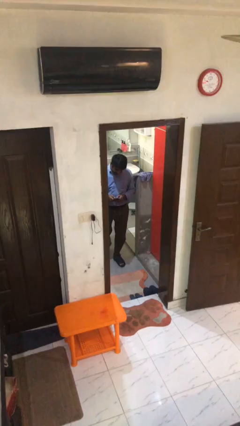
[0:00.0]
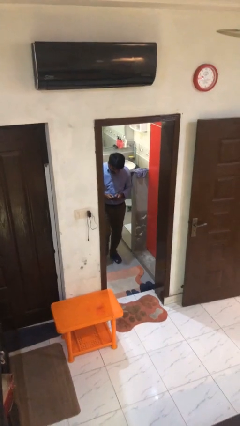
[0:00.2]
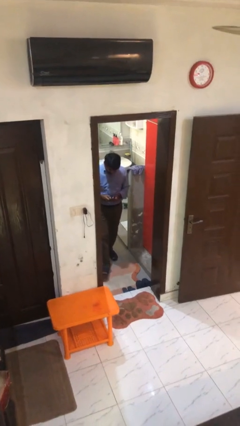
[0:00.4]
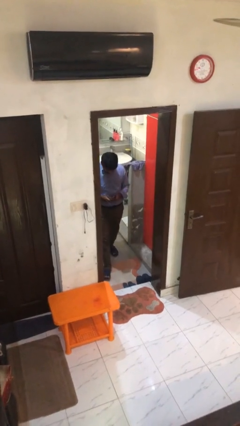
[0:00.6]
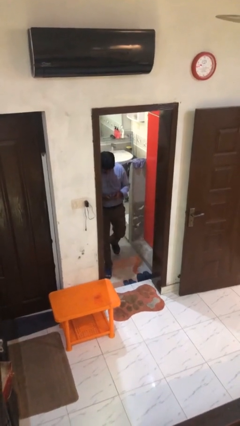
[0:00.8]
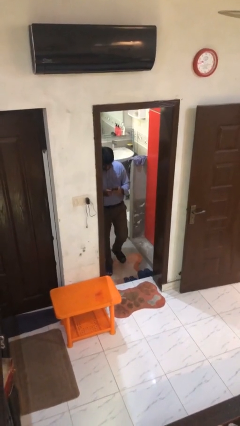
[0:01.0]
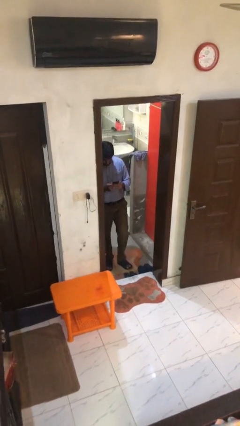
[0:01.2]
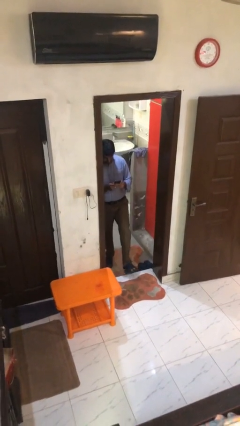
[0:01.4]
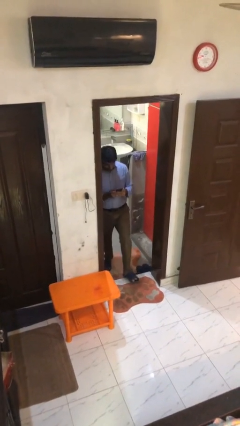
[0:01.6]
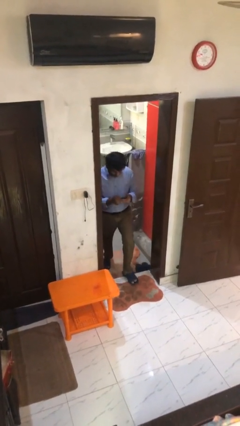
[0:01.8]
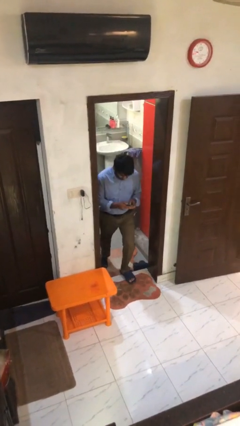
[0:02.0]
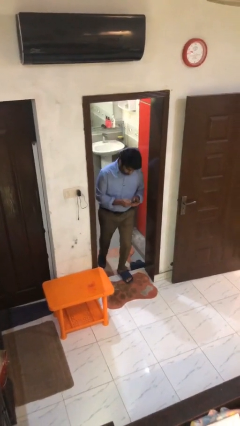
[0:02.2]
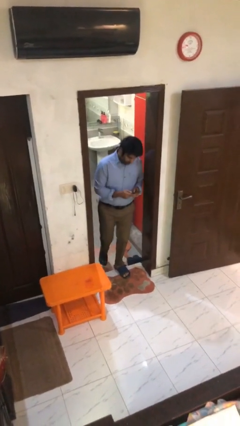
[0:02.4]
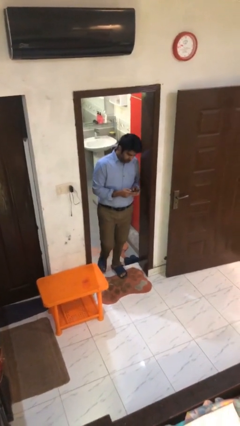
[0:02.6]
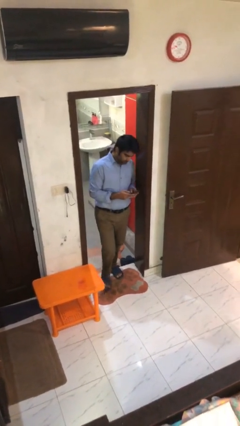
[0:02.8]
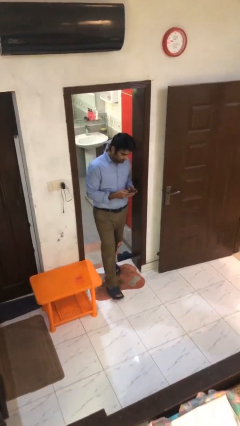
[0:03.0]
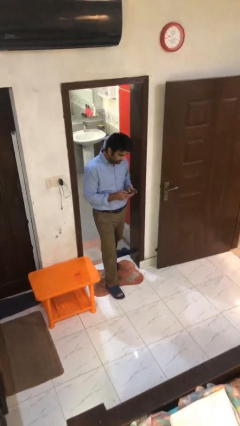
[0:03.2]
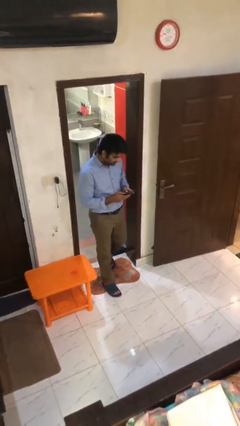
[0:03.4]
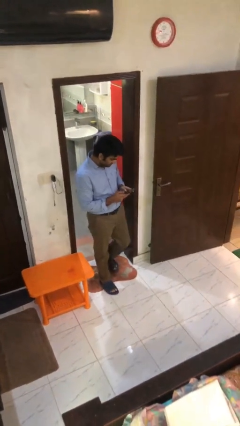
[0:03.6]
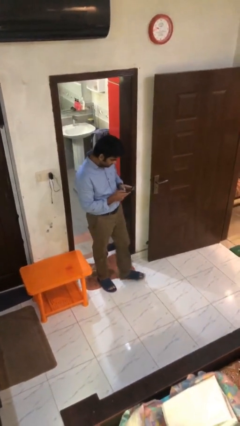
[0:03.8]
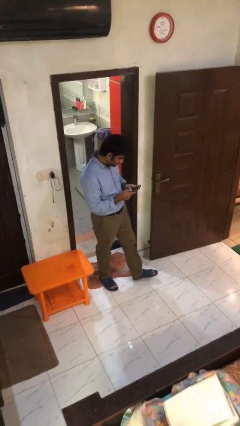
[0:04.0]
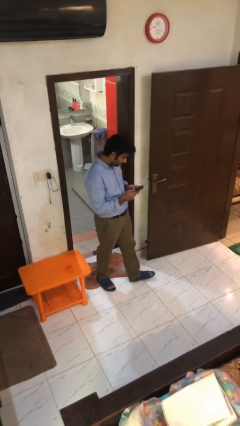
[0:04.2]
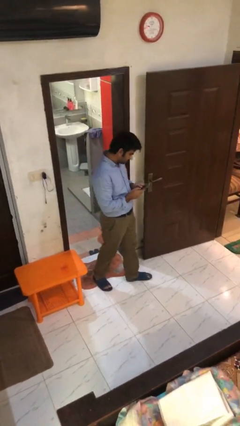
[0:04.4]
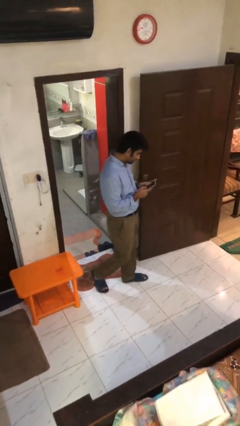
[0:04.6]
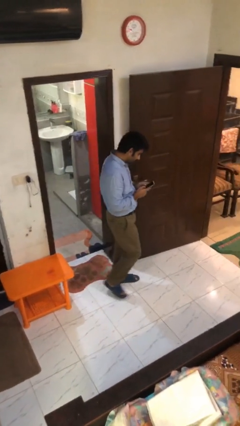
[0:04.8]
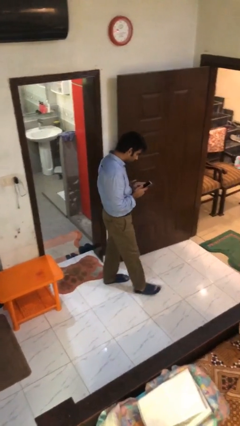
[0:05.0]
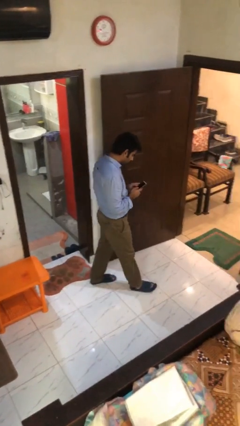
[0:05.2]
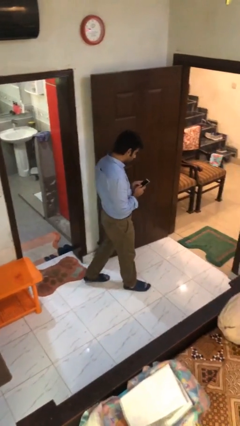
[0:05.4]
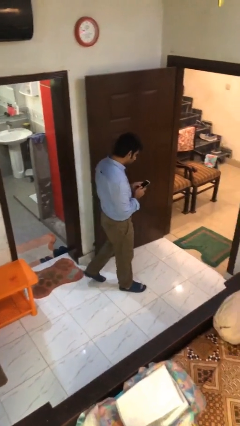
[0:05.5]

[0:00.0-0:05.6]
person texts on phone

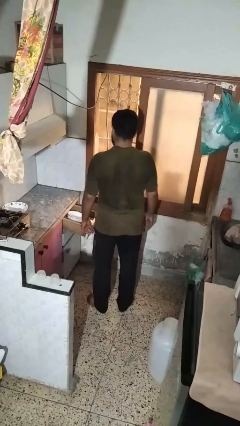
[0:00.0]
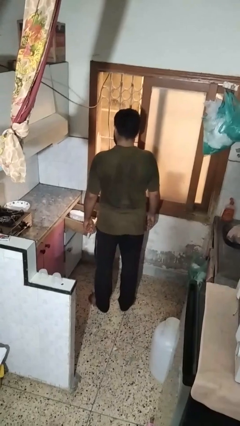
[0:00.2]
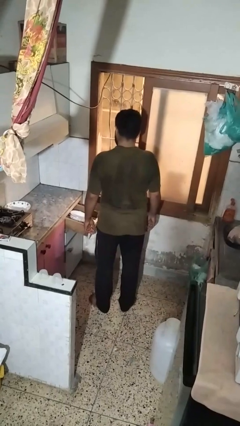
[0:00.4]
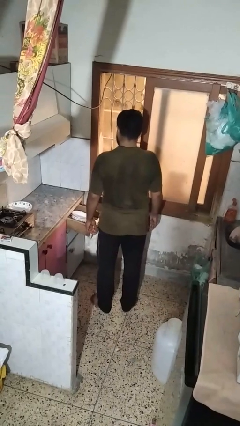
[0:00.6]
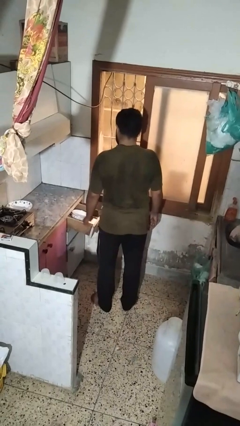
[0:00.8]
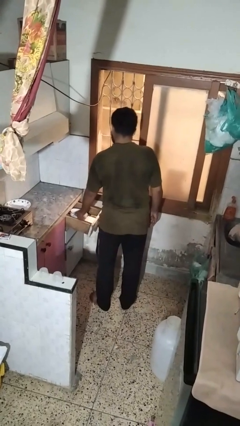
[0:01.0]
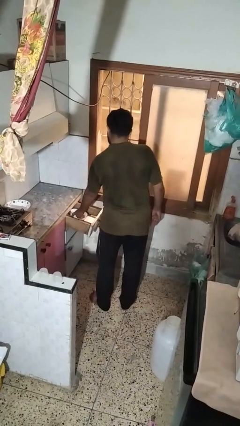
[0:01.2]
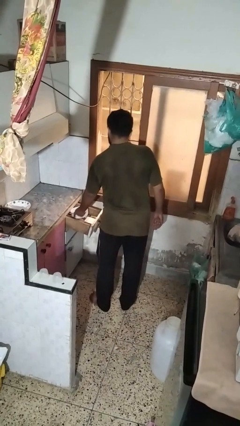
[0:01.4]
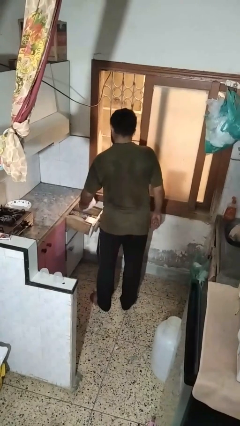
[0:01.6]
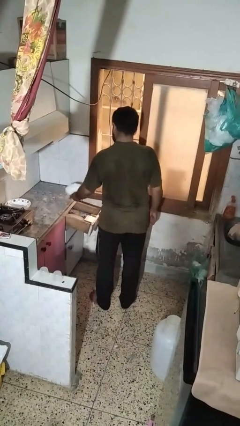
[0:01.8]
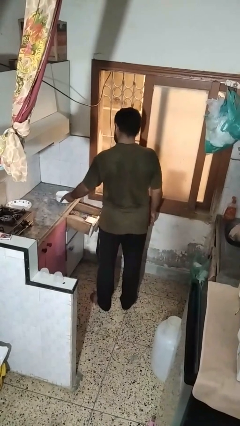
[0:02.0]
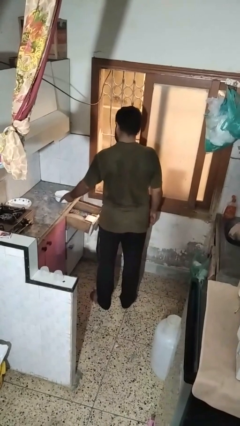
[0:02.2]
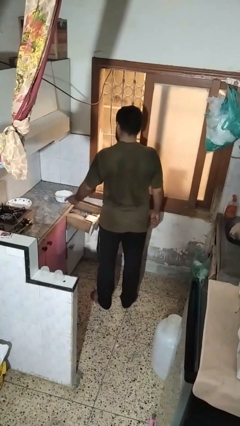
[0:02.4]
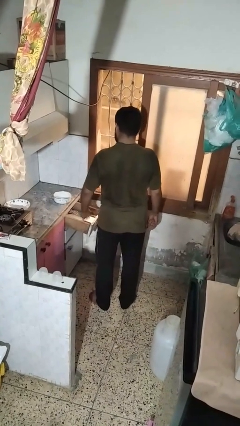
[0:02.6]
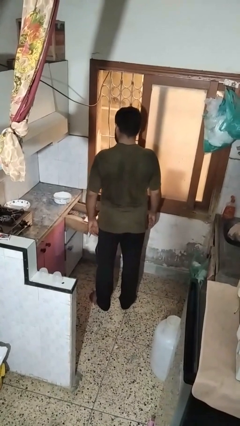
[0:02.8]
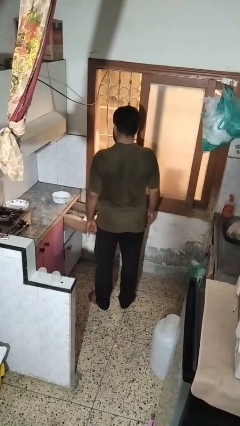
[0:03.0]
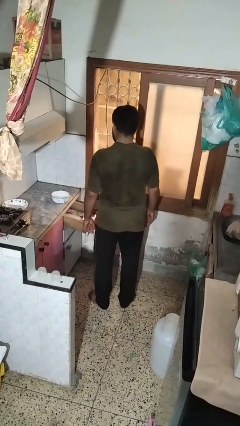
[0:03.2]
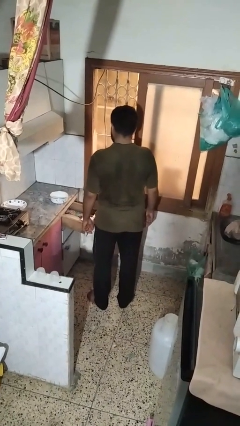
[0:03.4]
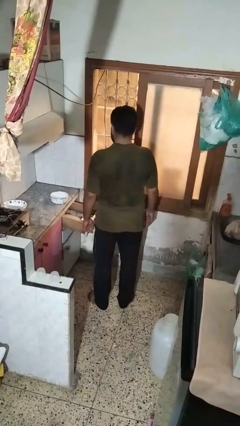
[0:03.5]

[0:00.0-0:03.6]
person takes object from kitchen drawer

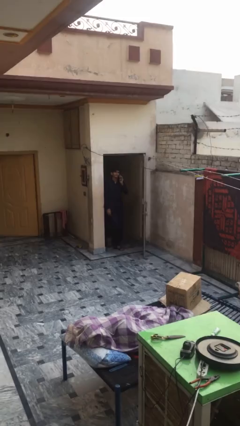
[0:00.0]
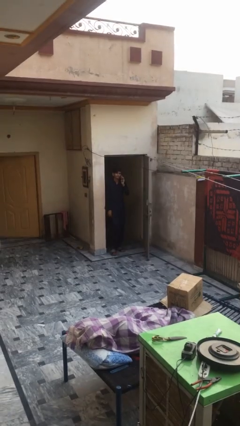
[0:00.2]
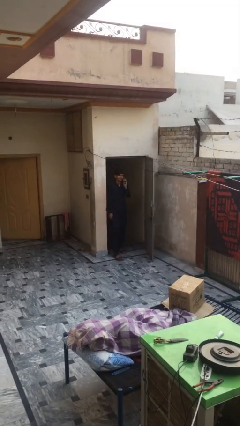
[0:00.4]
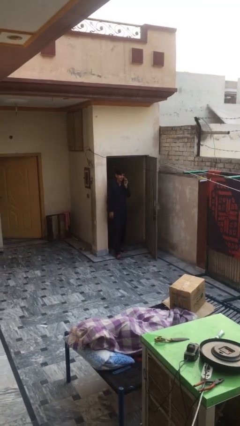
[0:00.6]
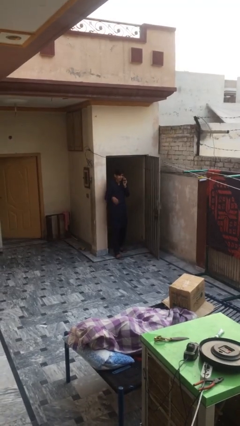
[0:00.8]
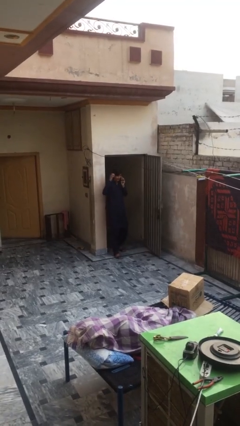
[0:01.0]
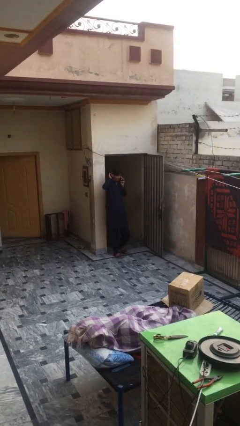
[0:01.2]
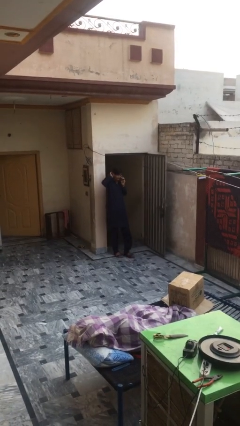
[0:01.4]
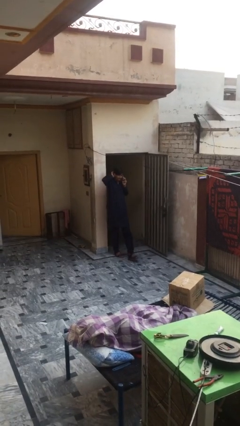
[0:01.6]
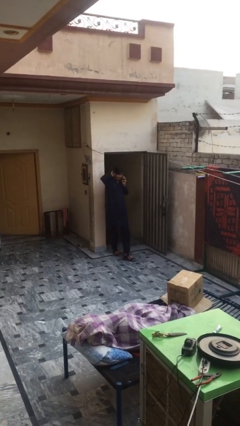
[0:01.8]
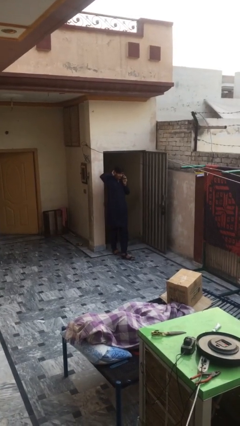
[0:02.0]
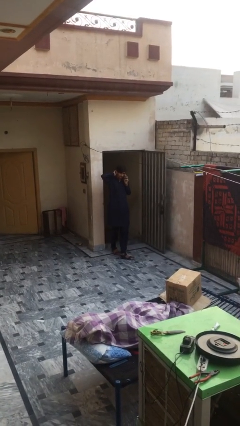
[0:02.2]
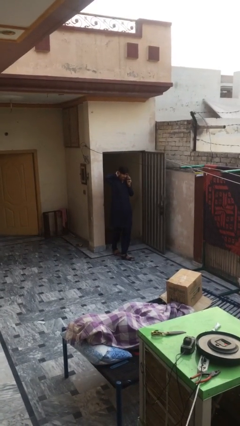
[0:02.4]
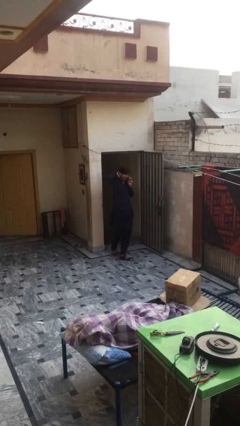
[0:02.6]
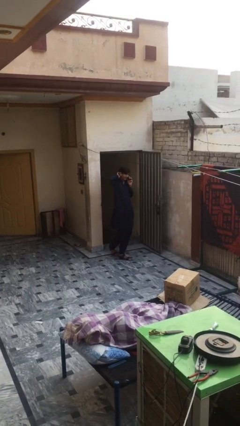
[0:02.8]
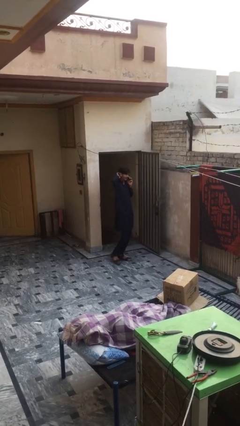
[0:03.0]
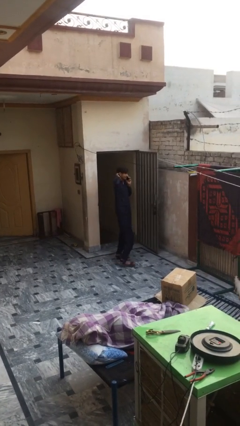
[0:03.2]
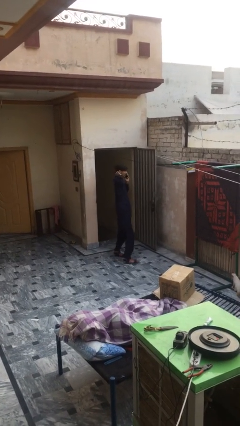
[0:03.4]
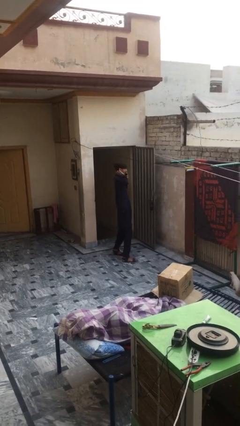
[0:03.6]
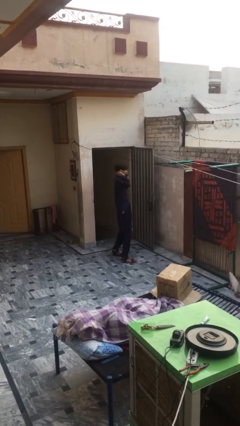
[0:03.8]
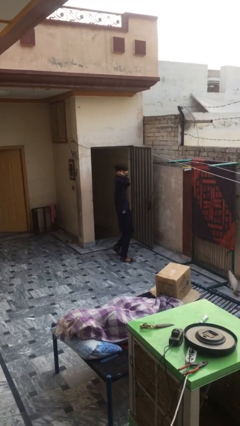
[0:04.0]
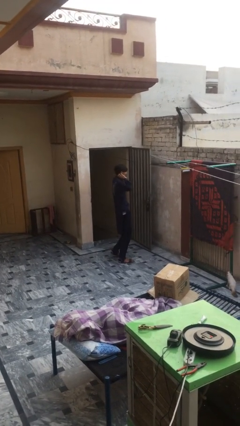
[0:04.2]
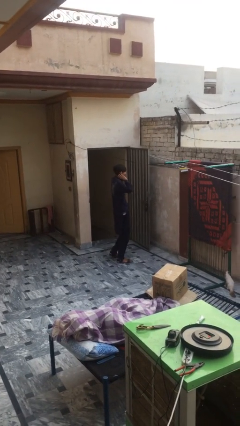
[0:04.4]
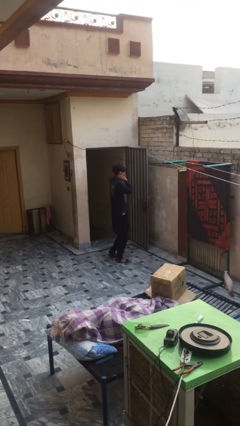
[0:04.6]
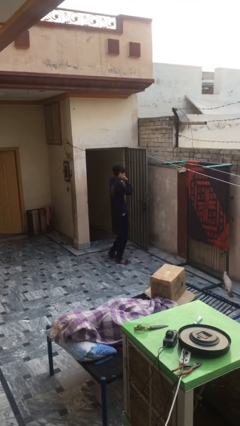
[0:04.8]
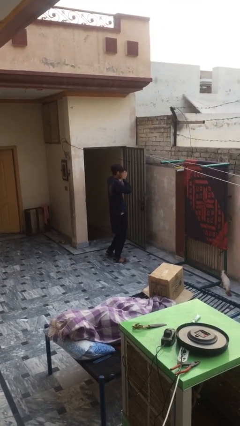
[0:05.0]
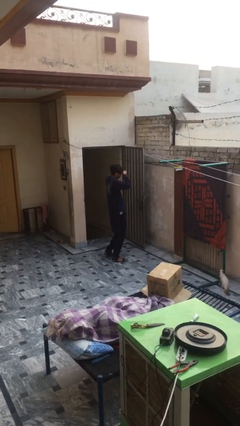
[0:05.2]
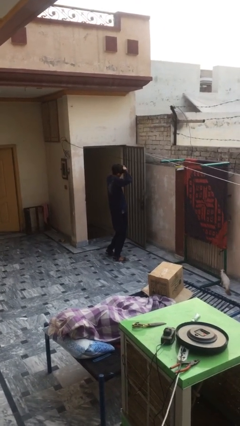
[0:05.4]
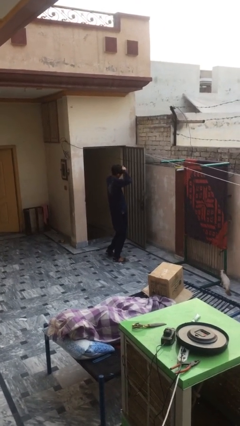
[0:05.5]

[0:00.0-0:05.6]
person enters scene through structure

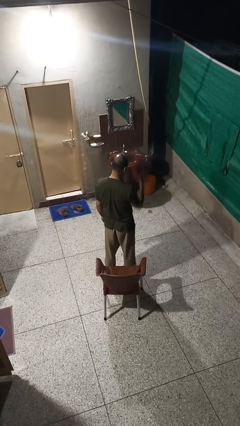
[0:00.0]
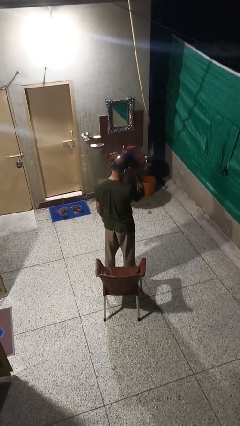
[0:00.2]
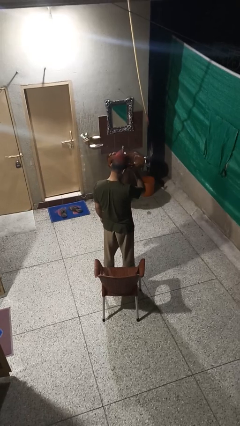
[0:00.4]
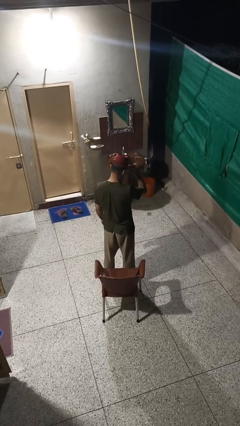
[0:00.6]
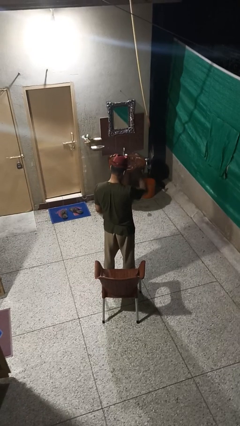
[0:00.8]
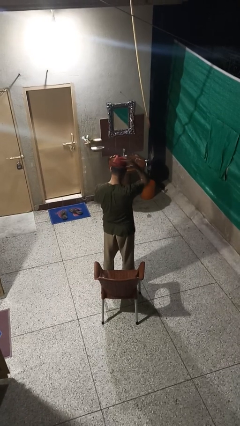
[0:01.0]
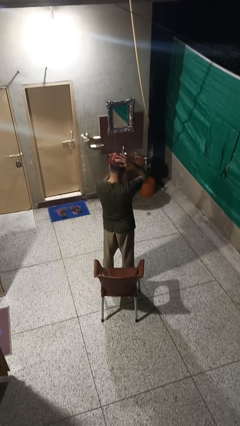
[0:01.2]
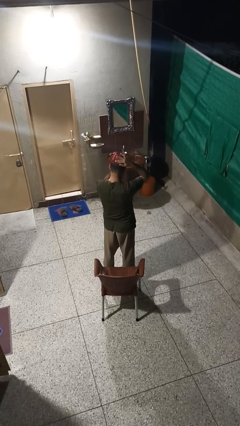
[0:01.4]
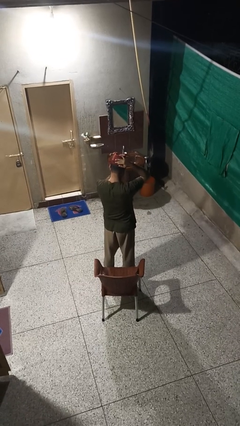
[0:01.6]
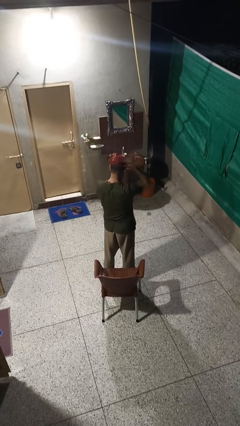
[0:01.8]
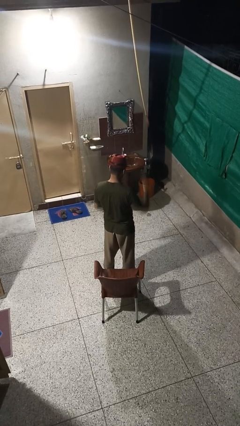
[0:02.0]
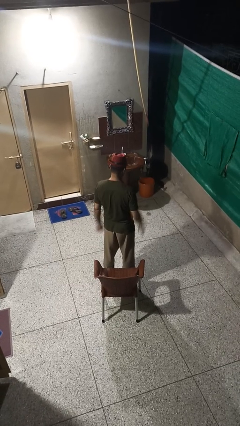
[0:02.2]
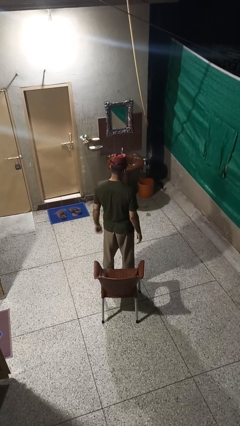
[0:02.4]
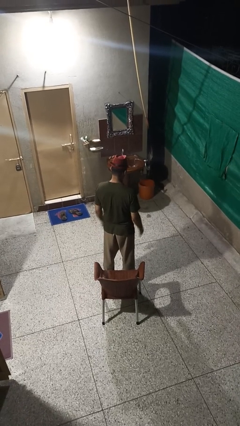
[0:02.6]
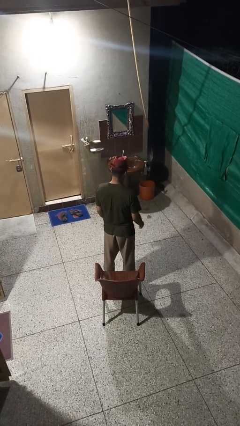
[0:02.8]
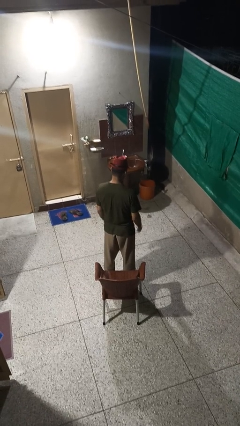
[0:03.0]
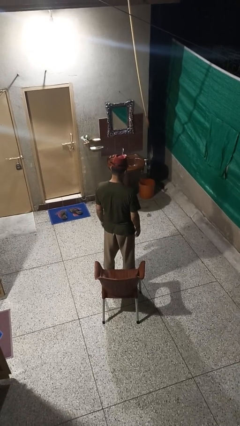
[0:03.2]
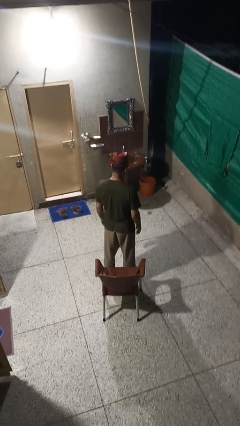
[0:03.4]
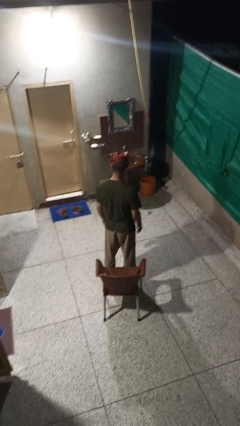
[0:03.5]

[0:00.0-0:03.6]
person puts on hat
